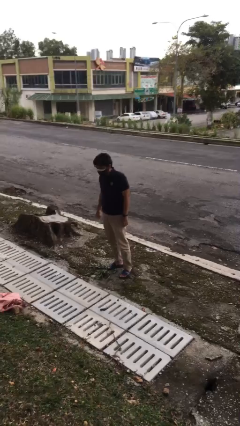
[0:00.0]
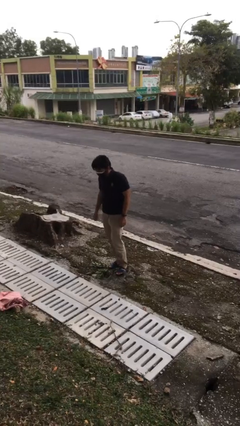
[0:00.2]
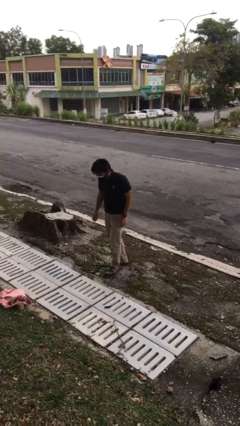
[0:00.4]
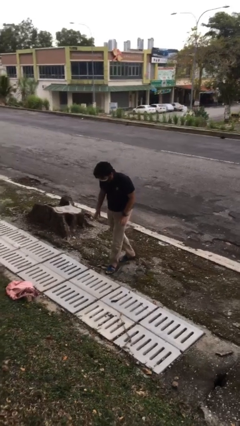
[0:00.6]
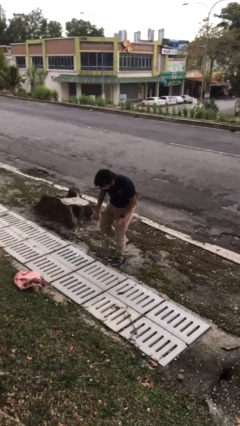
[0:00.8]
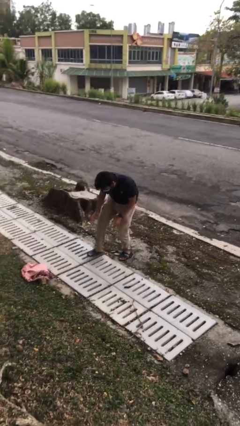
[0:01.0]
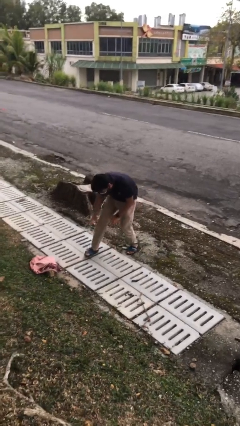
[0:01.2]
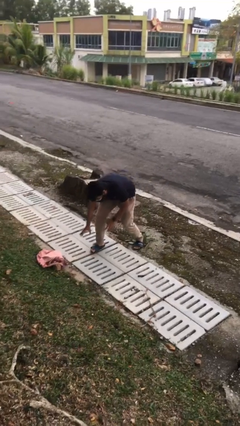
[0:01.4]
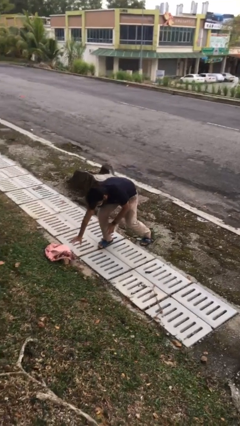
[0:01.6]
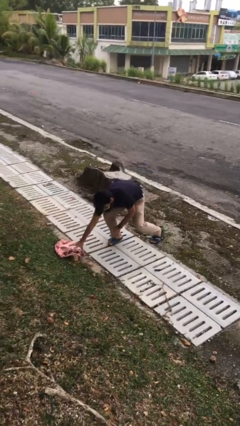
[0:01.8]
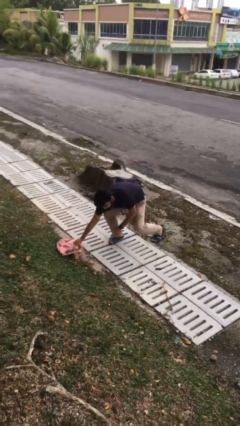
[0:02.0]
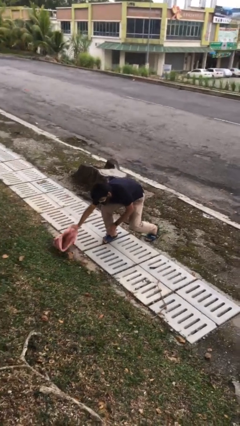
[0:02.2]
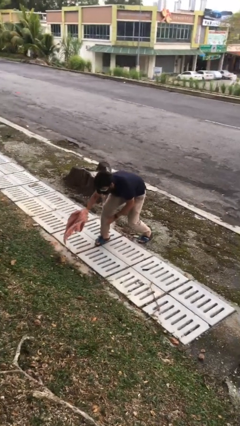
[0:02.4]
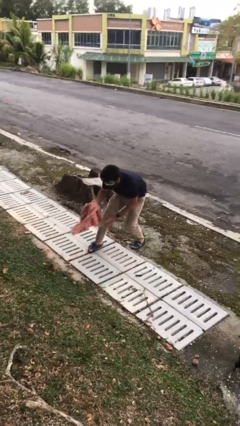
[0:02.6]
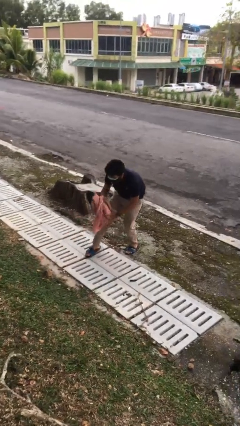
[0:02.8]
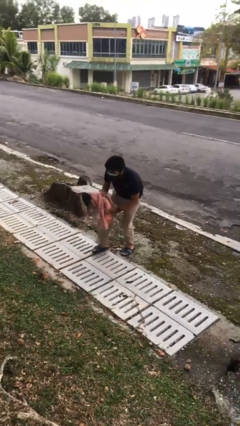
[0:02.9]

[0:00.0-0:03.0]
person picks up object from floor

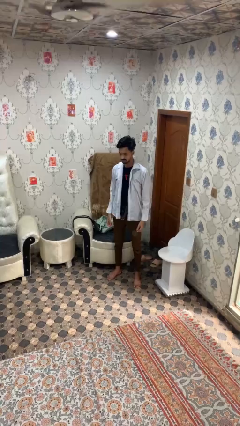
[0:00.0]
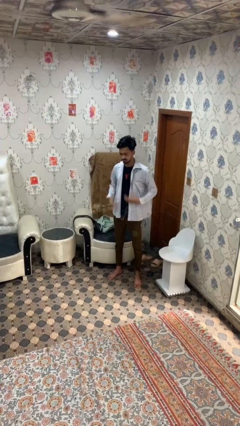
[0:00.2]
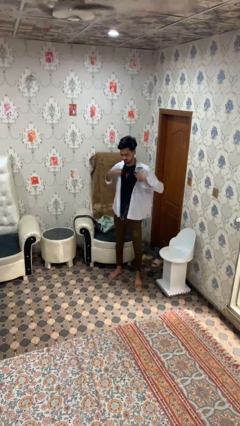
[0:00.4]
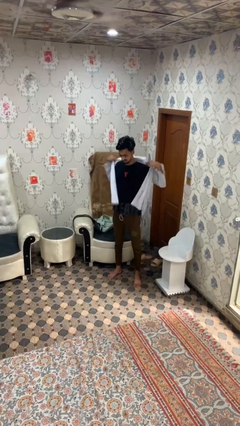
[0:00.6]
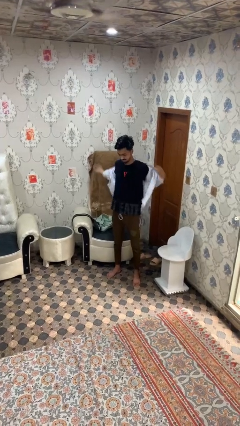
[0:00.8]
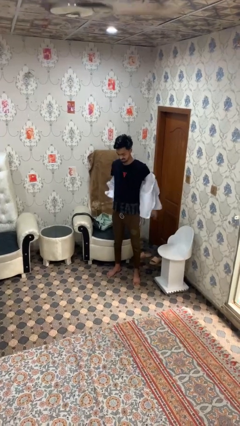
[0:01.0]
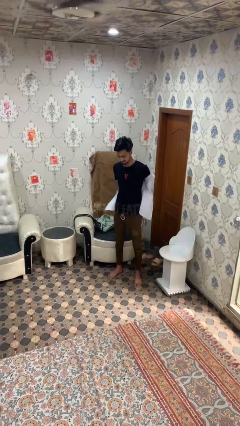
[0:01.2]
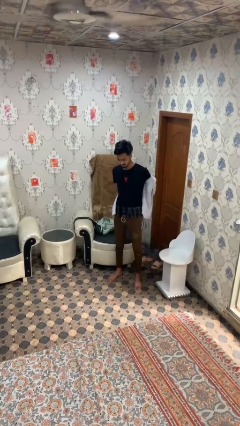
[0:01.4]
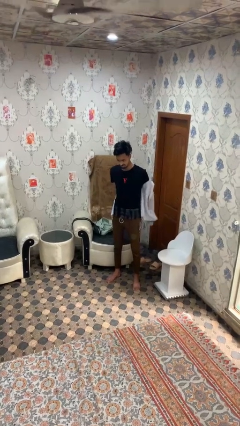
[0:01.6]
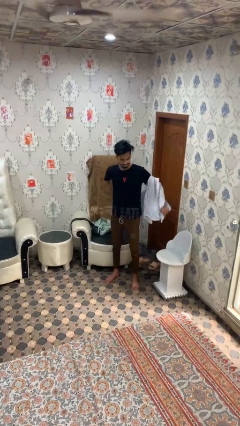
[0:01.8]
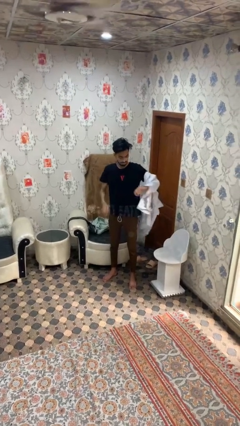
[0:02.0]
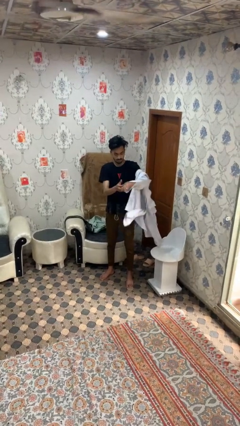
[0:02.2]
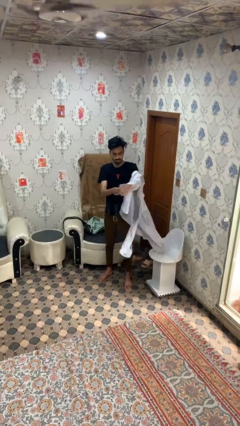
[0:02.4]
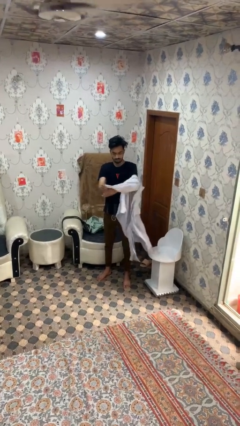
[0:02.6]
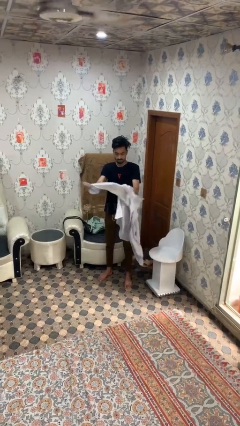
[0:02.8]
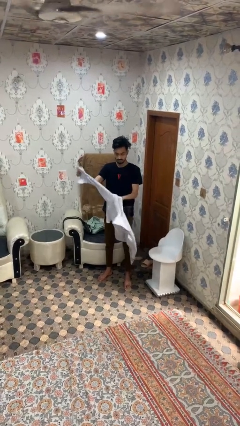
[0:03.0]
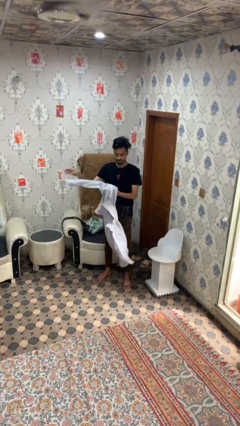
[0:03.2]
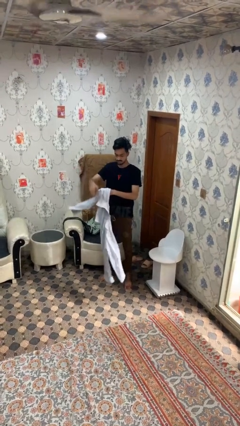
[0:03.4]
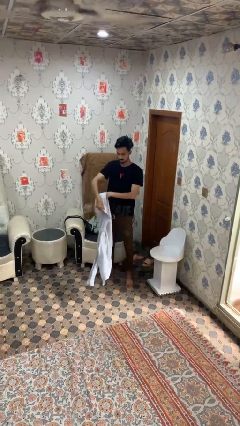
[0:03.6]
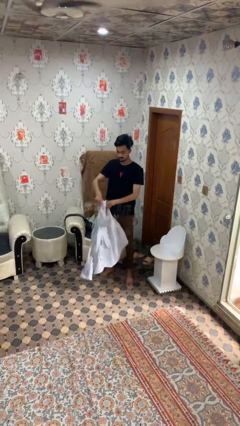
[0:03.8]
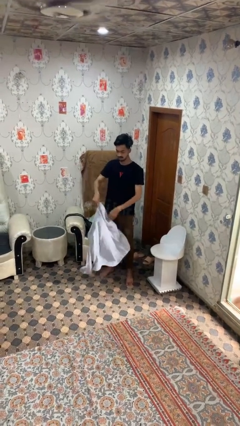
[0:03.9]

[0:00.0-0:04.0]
person takes off shirt

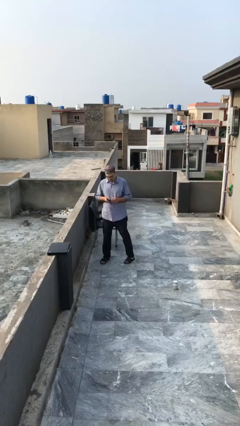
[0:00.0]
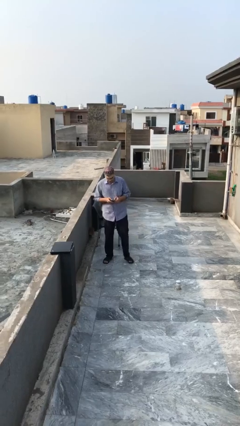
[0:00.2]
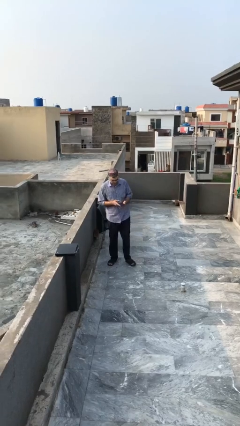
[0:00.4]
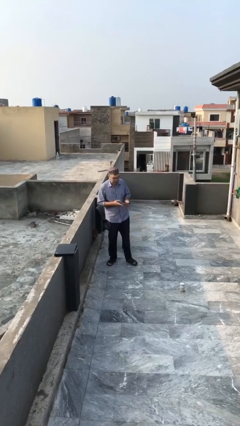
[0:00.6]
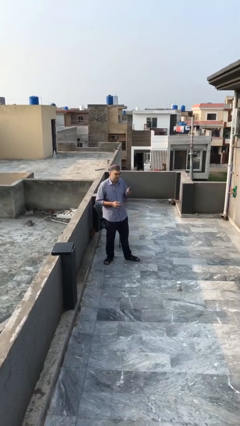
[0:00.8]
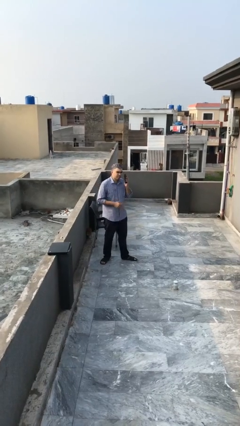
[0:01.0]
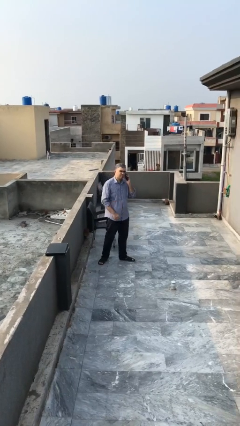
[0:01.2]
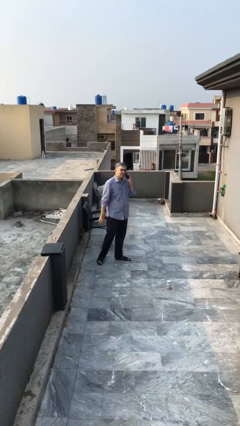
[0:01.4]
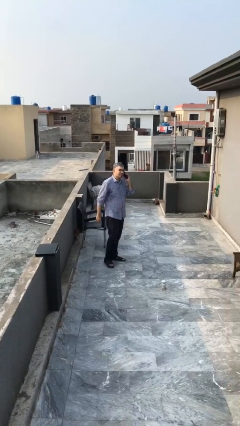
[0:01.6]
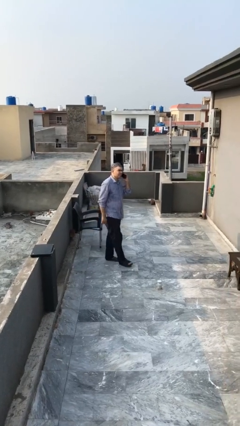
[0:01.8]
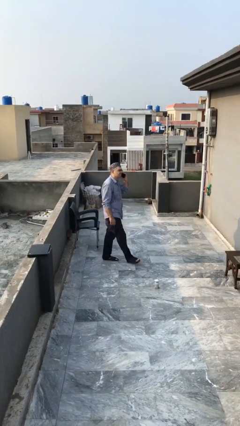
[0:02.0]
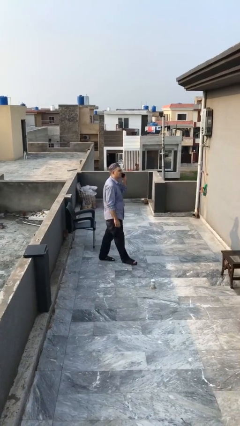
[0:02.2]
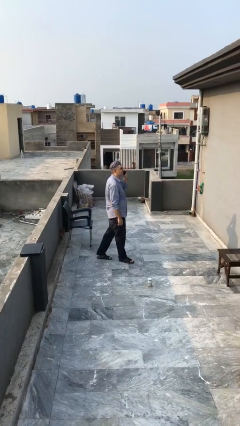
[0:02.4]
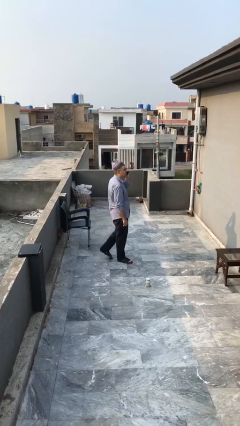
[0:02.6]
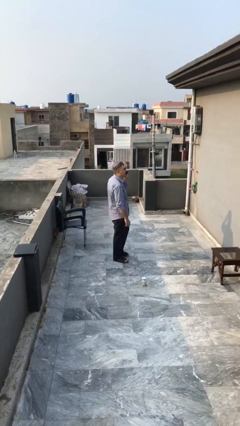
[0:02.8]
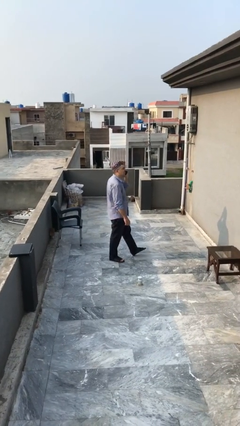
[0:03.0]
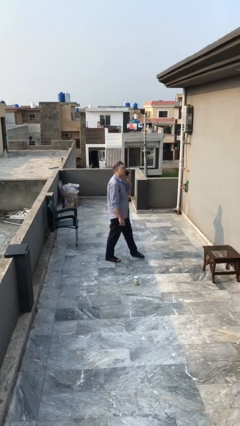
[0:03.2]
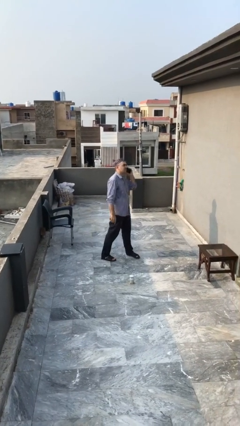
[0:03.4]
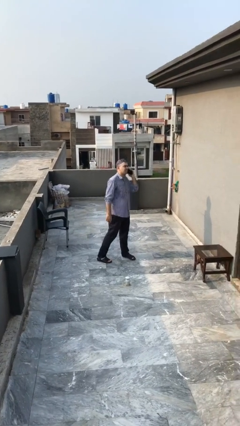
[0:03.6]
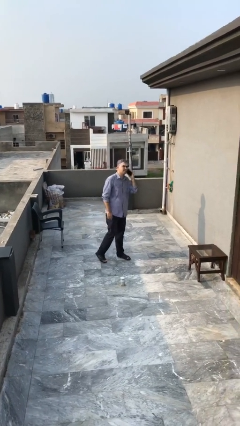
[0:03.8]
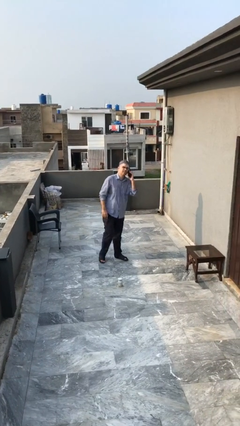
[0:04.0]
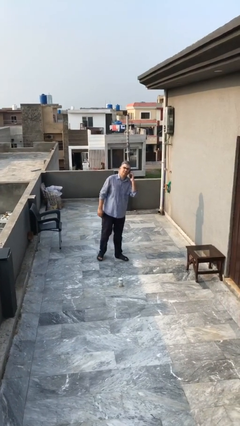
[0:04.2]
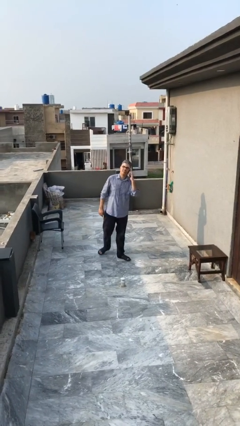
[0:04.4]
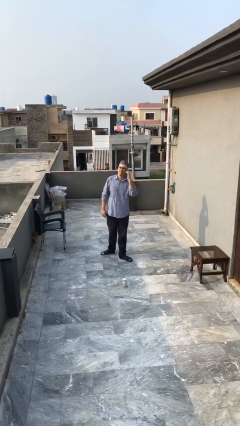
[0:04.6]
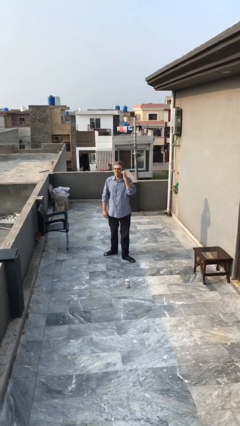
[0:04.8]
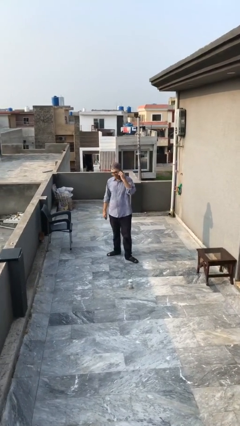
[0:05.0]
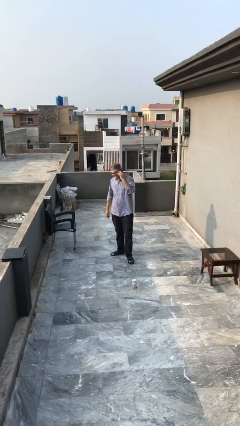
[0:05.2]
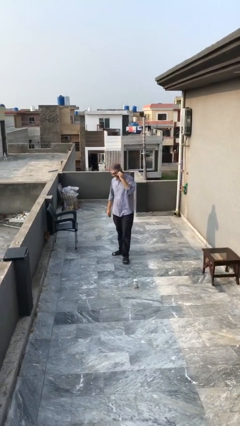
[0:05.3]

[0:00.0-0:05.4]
person talks on phone

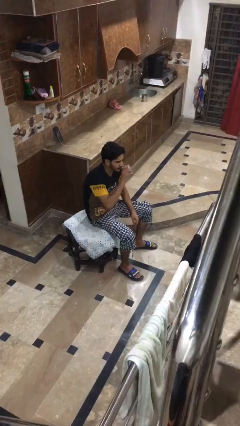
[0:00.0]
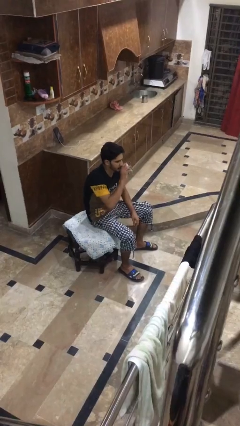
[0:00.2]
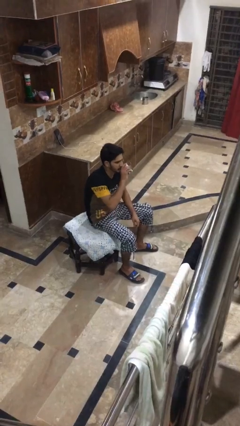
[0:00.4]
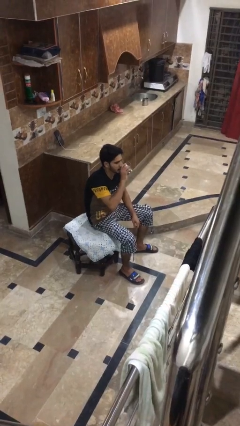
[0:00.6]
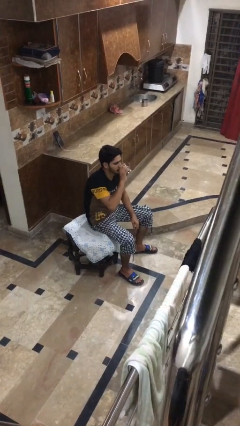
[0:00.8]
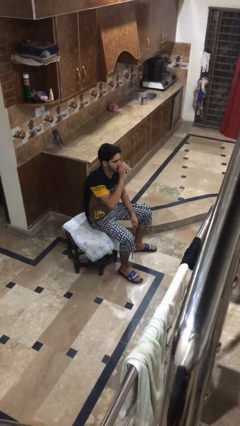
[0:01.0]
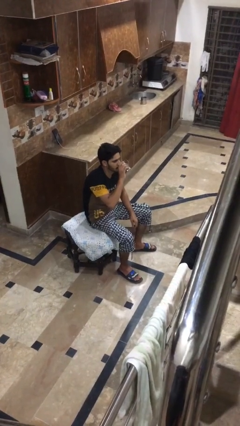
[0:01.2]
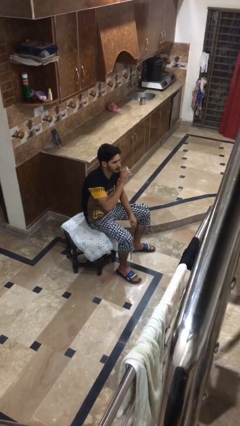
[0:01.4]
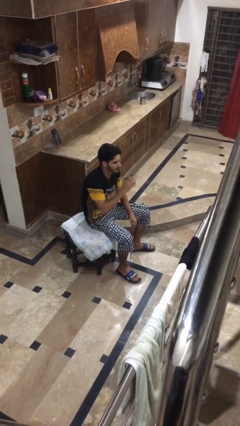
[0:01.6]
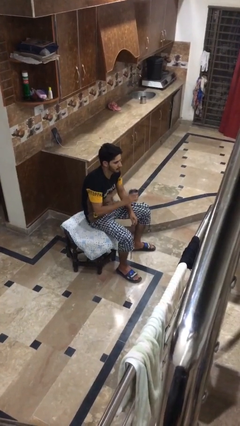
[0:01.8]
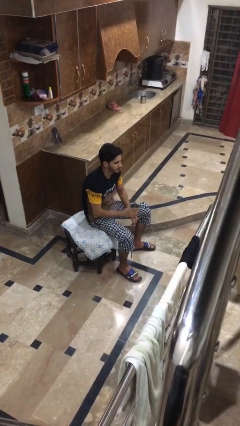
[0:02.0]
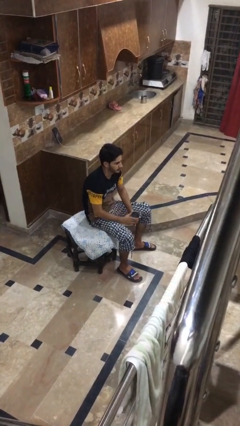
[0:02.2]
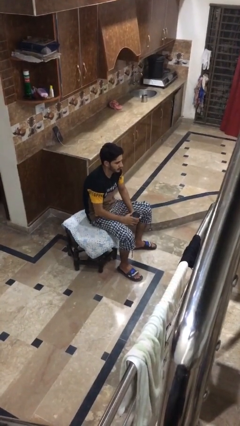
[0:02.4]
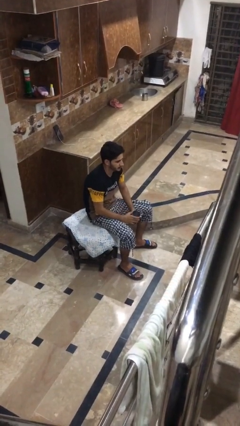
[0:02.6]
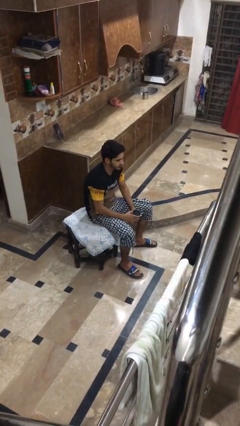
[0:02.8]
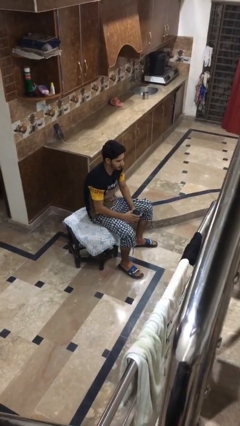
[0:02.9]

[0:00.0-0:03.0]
person drinks from mug

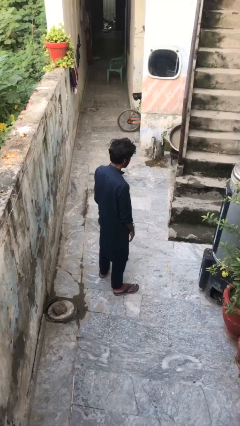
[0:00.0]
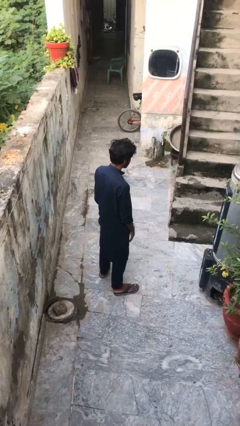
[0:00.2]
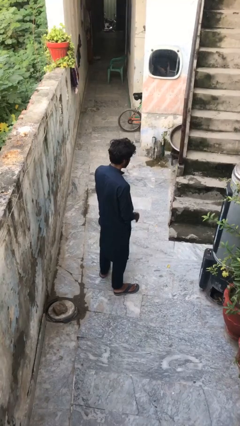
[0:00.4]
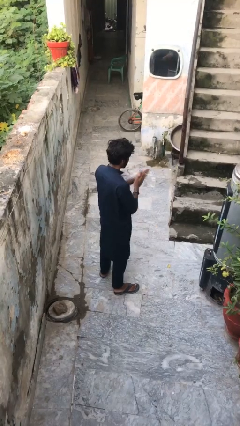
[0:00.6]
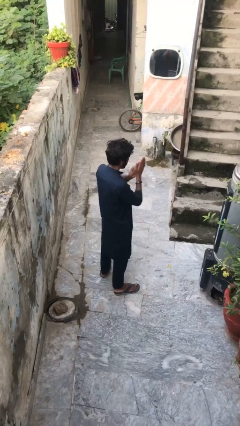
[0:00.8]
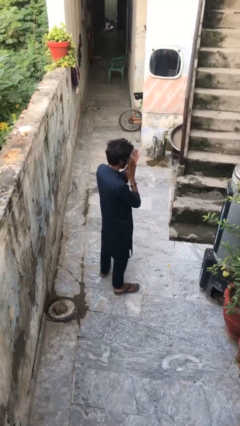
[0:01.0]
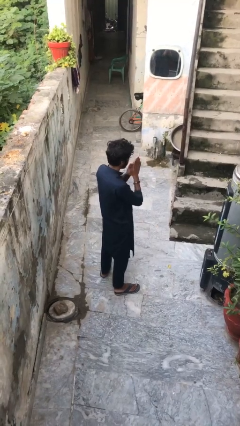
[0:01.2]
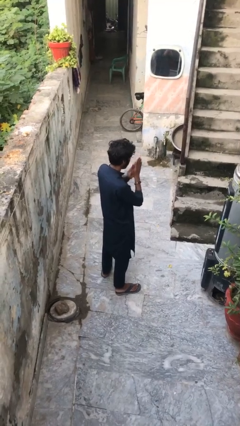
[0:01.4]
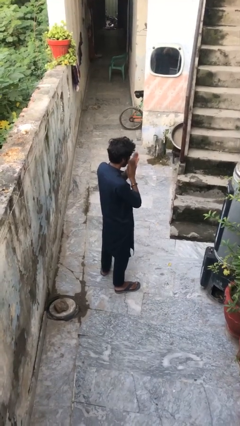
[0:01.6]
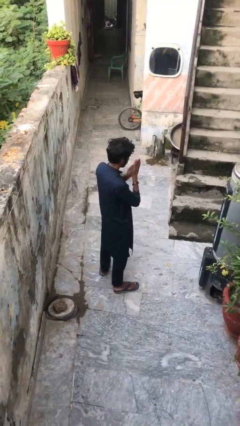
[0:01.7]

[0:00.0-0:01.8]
person blows into hands
